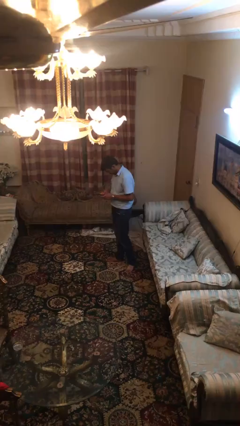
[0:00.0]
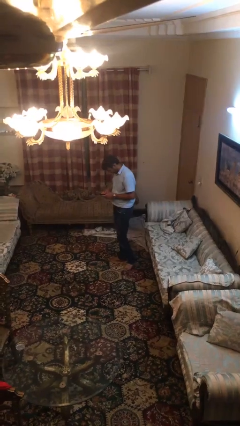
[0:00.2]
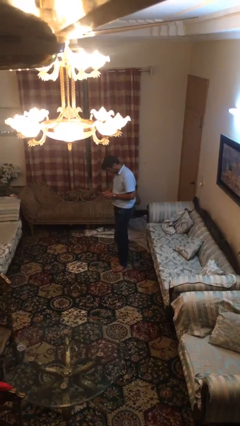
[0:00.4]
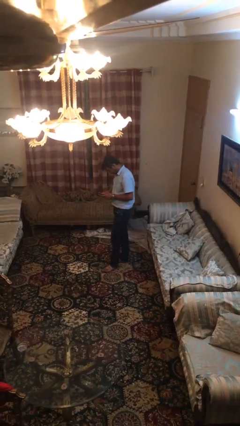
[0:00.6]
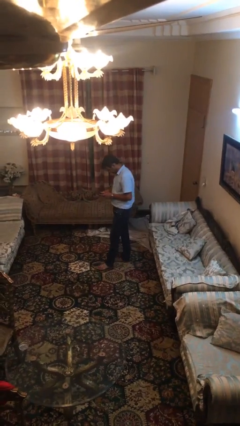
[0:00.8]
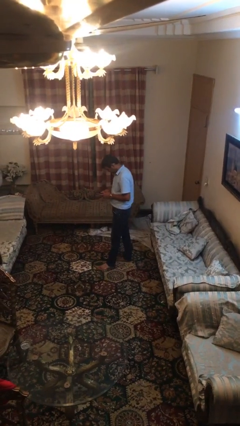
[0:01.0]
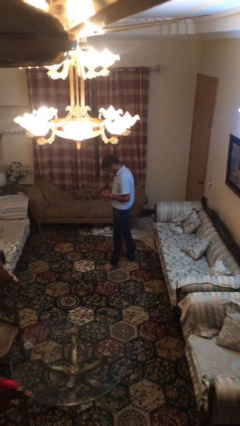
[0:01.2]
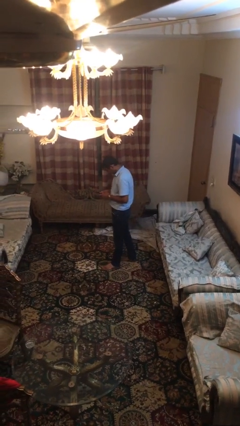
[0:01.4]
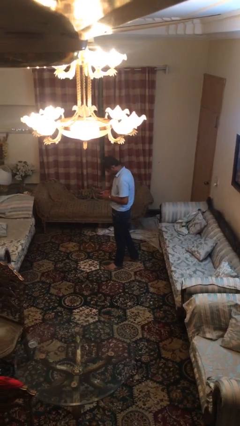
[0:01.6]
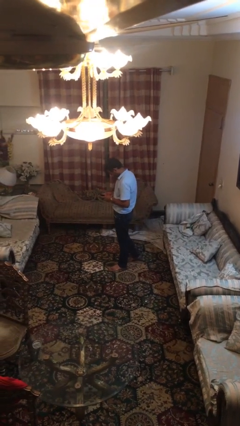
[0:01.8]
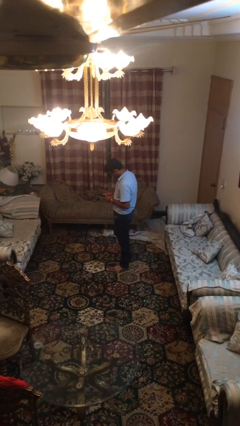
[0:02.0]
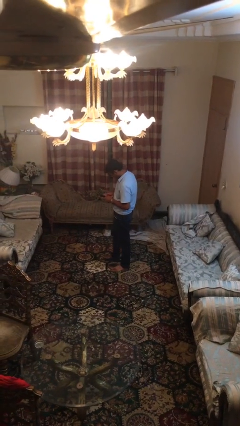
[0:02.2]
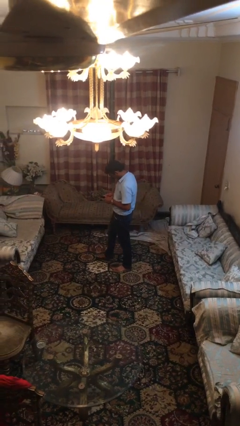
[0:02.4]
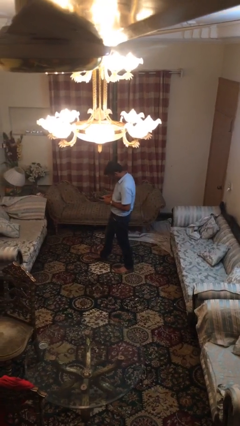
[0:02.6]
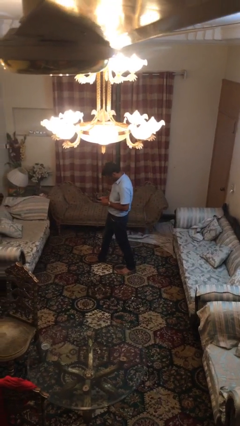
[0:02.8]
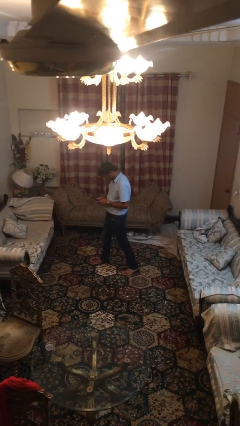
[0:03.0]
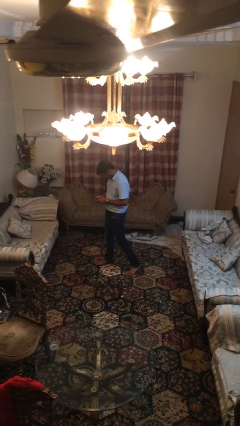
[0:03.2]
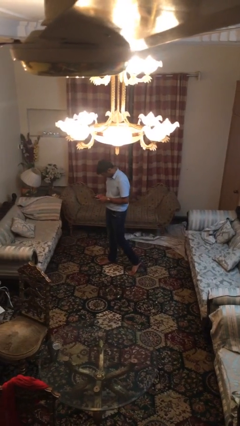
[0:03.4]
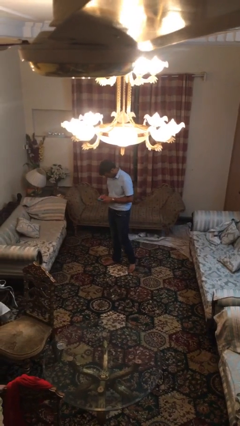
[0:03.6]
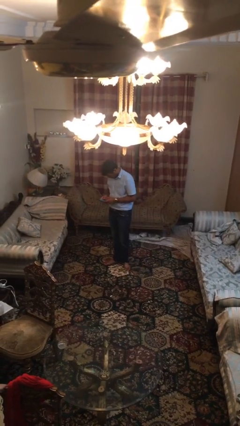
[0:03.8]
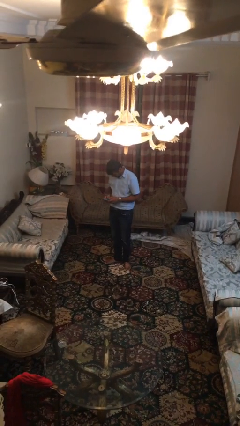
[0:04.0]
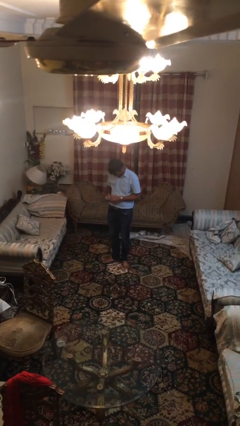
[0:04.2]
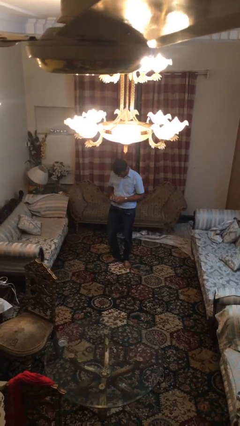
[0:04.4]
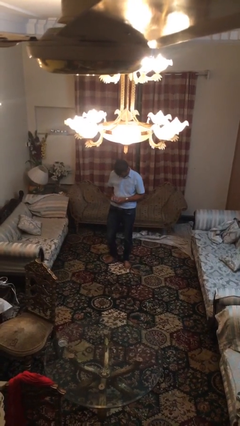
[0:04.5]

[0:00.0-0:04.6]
person texts on phone

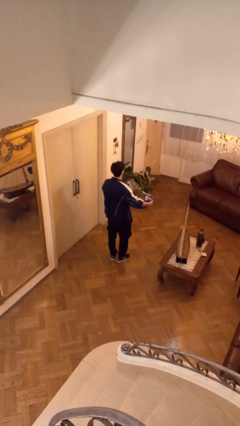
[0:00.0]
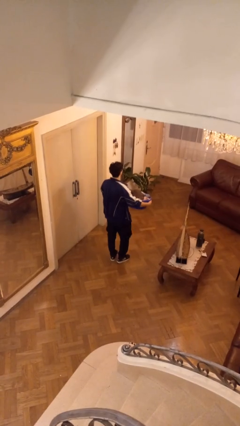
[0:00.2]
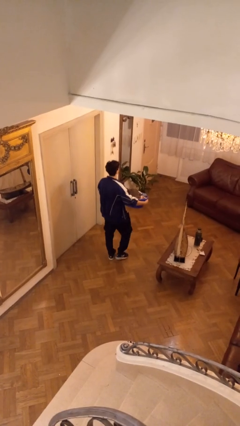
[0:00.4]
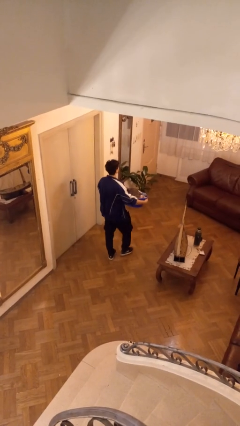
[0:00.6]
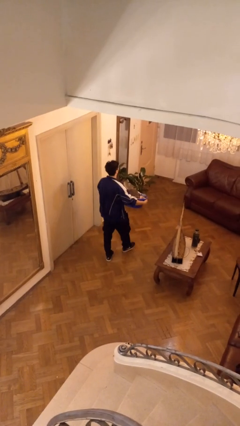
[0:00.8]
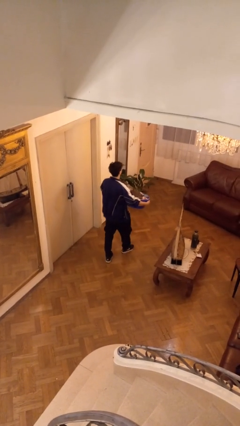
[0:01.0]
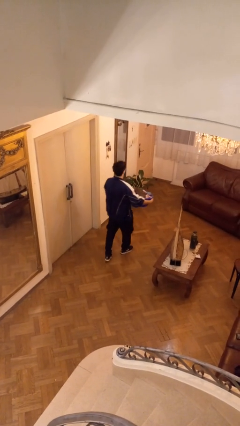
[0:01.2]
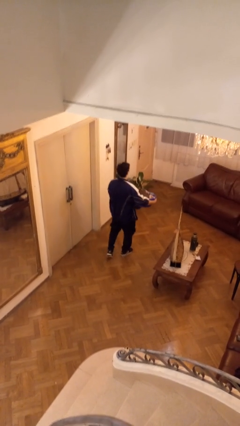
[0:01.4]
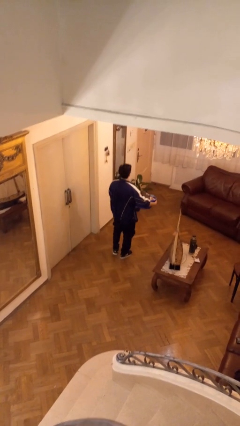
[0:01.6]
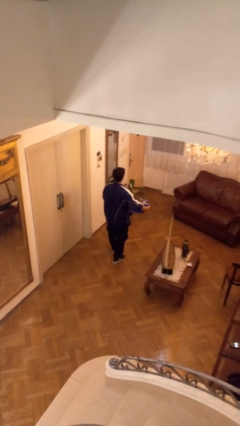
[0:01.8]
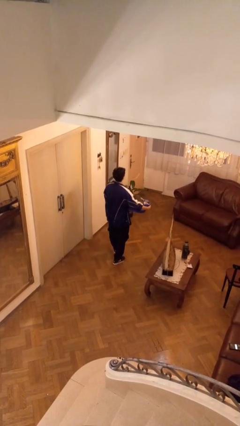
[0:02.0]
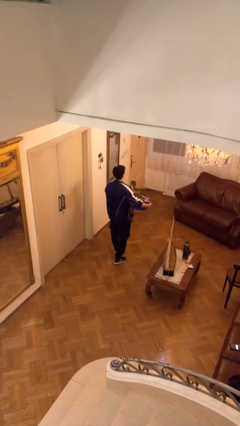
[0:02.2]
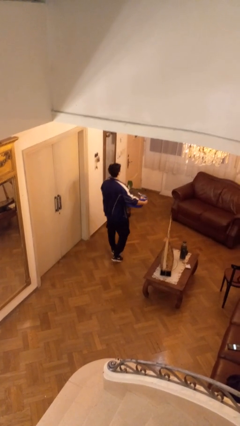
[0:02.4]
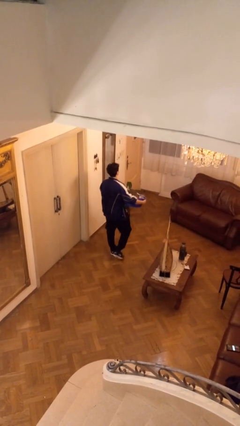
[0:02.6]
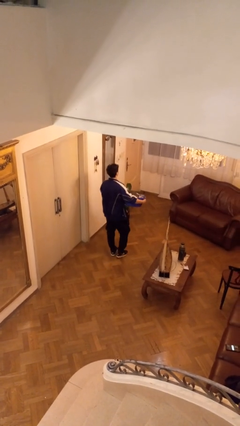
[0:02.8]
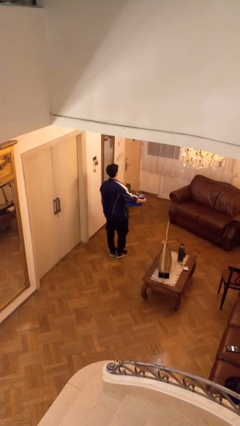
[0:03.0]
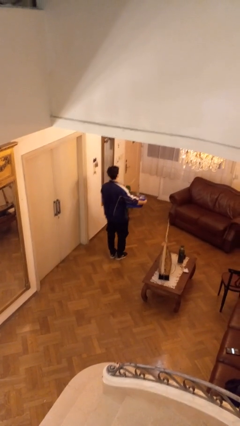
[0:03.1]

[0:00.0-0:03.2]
person carries laundry basket

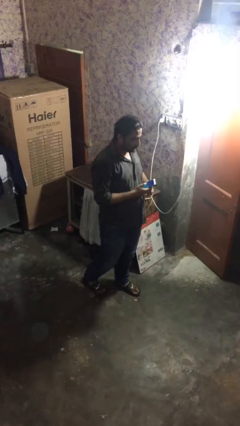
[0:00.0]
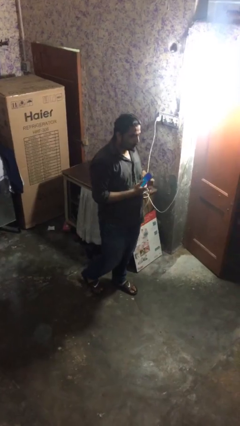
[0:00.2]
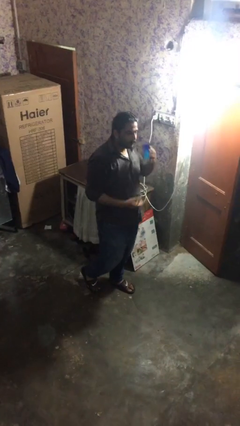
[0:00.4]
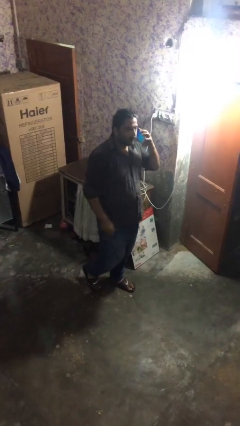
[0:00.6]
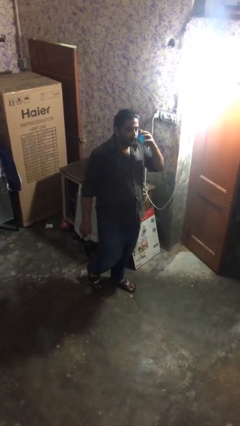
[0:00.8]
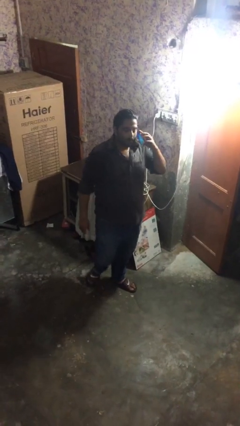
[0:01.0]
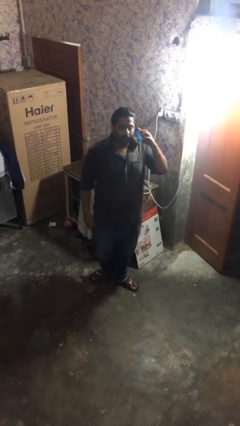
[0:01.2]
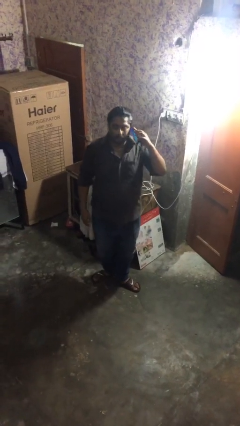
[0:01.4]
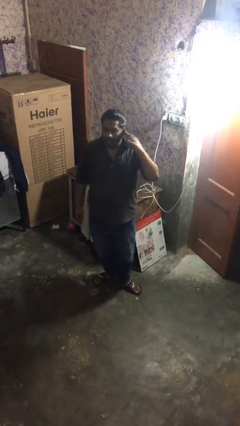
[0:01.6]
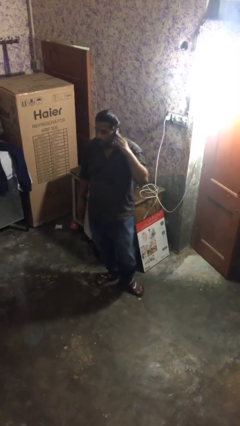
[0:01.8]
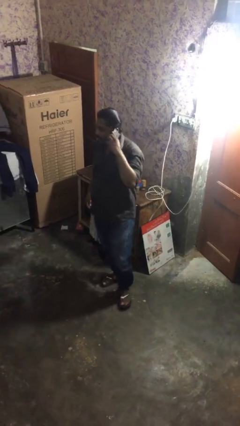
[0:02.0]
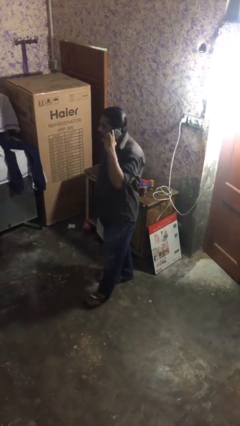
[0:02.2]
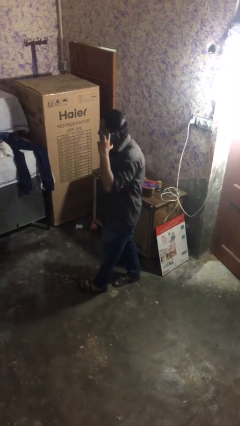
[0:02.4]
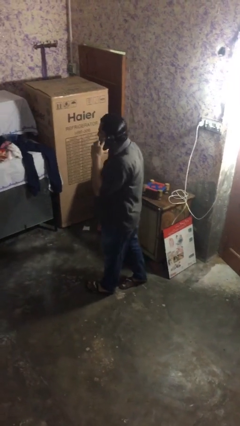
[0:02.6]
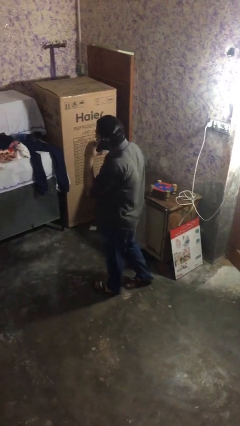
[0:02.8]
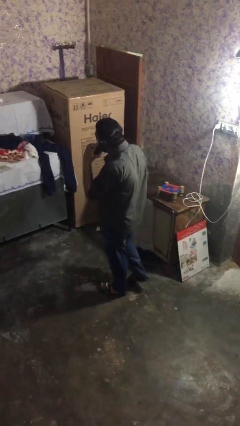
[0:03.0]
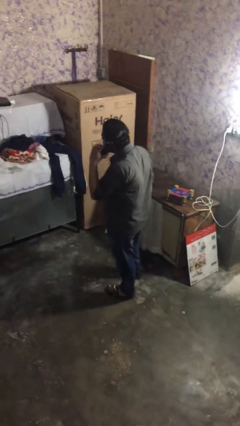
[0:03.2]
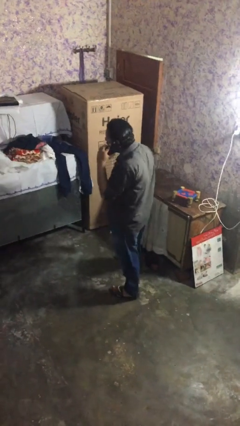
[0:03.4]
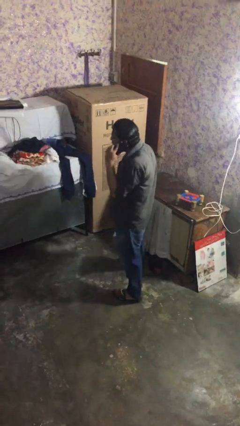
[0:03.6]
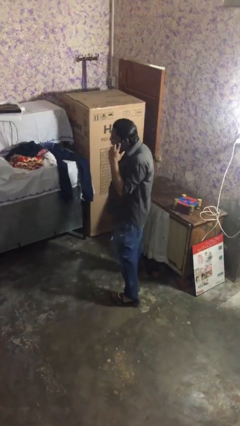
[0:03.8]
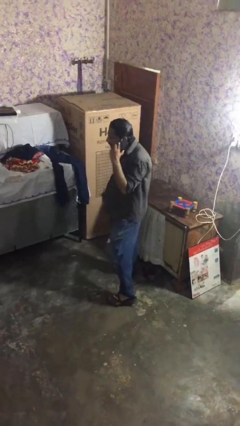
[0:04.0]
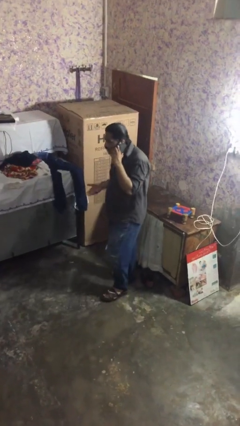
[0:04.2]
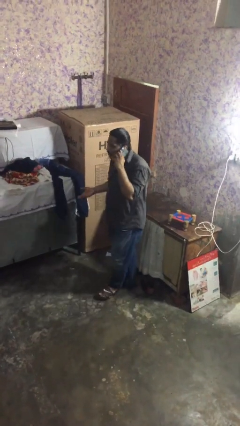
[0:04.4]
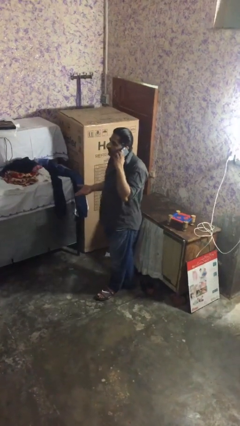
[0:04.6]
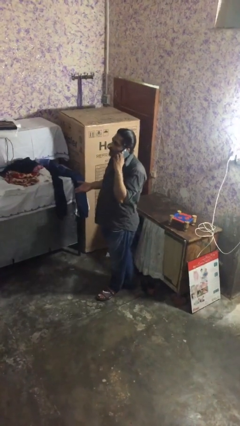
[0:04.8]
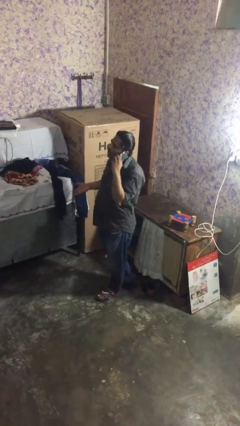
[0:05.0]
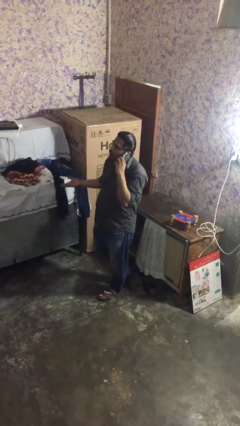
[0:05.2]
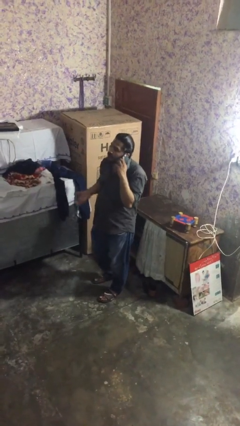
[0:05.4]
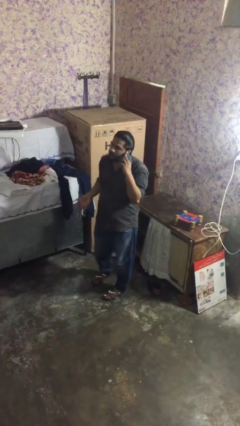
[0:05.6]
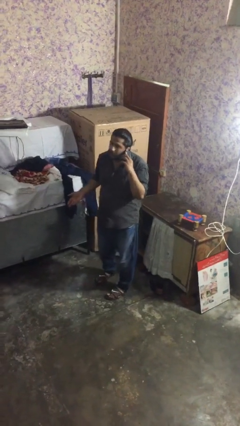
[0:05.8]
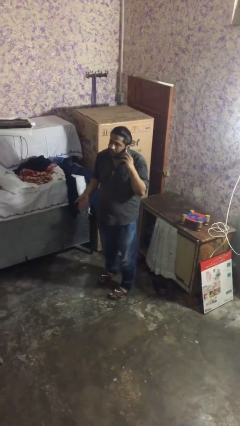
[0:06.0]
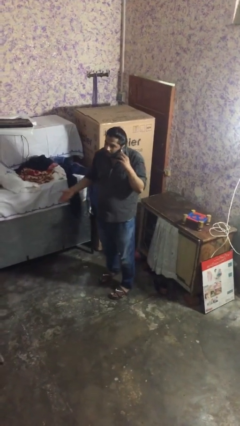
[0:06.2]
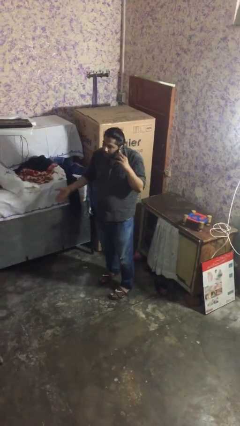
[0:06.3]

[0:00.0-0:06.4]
person talks on phone

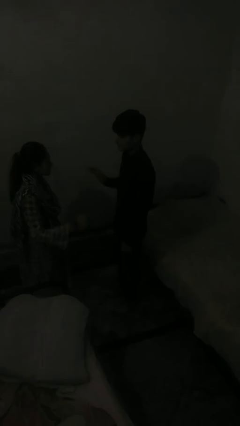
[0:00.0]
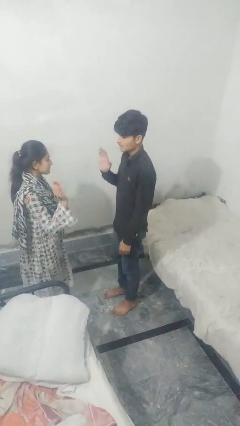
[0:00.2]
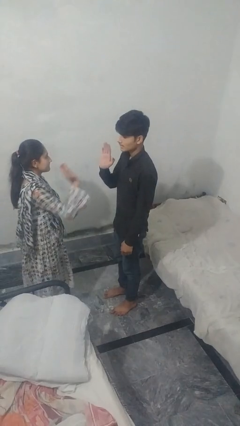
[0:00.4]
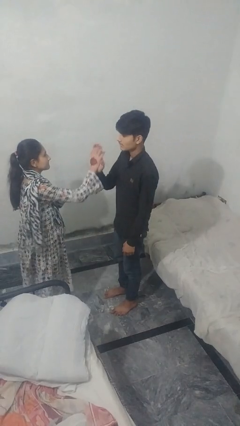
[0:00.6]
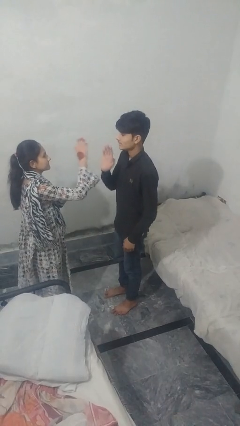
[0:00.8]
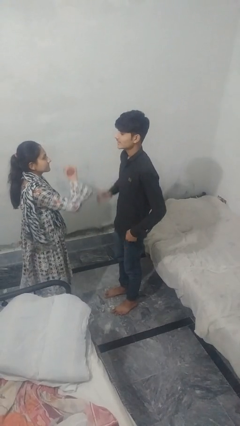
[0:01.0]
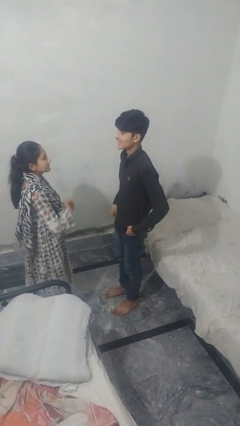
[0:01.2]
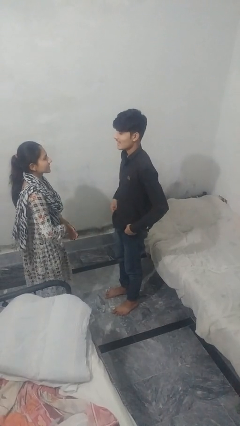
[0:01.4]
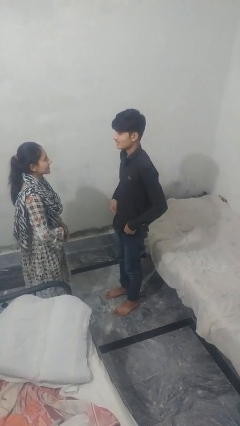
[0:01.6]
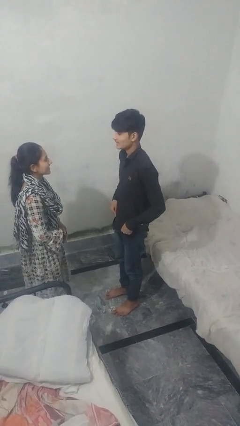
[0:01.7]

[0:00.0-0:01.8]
person highfives hand

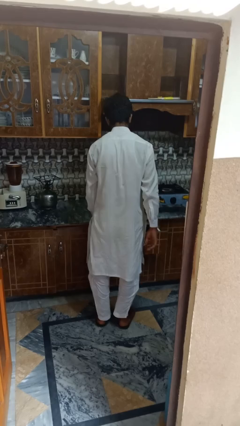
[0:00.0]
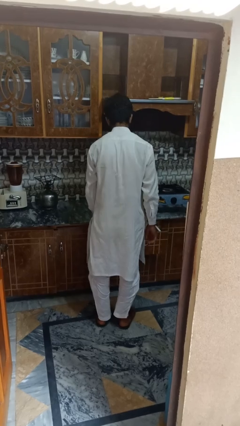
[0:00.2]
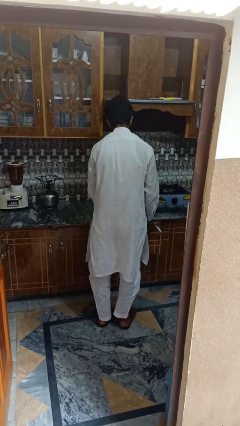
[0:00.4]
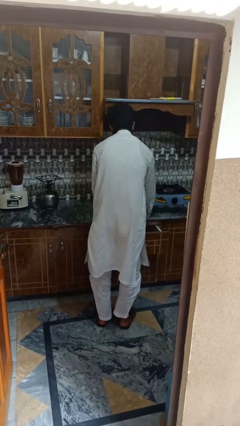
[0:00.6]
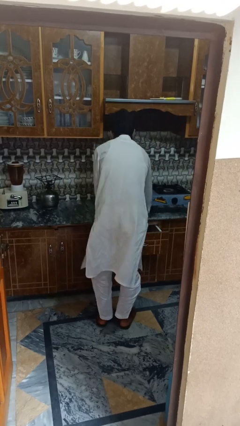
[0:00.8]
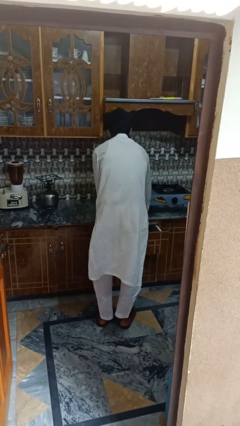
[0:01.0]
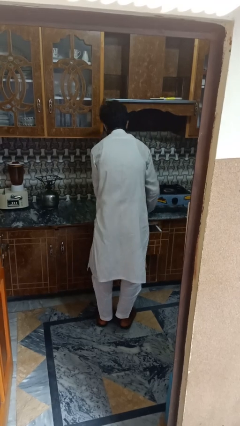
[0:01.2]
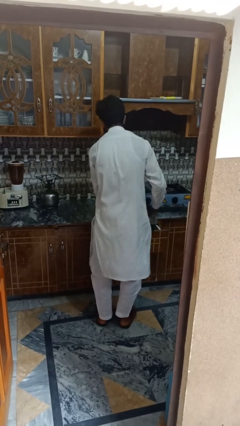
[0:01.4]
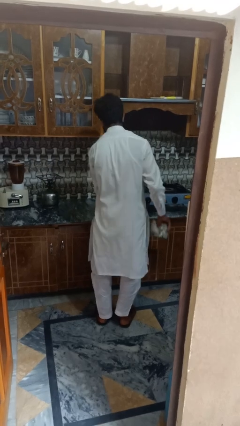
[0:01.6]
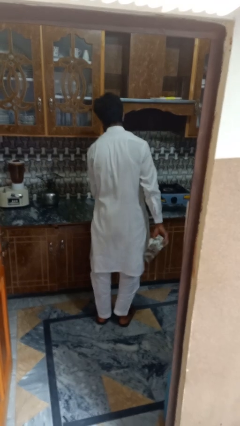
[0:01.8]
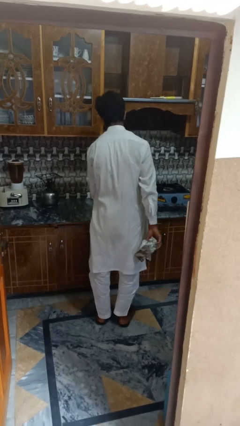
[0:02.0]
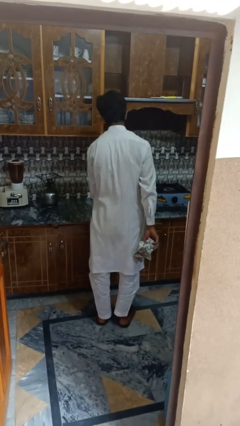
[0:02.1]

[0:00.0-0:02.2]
person puts object into kitchen drawer
